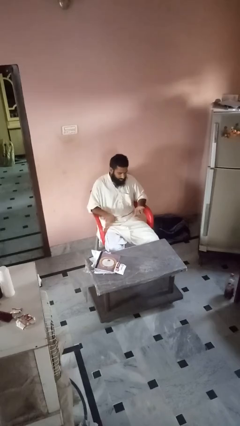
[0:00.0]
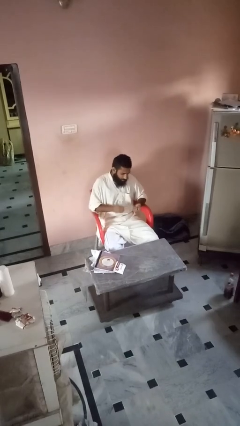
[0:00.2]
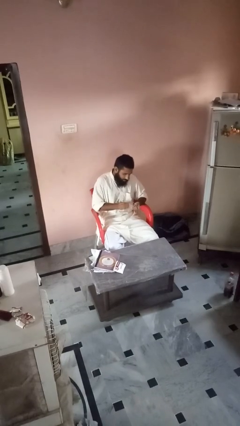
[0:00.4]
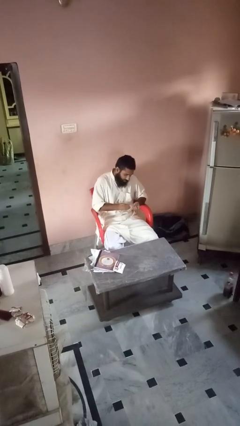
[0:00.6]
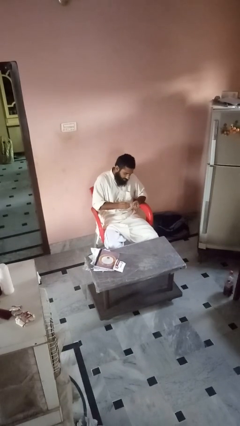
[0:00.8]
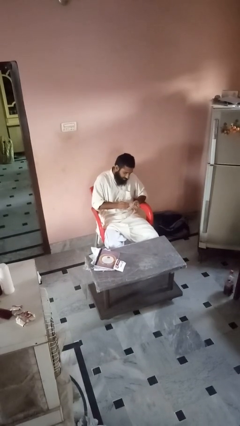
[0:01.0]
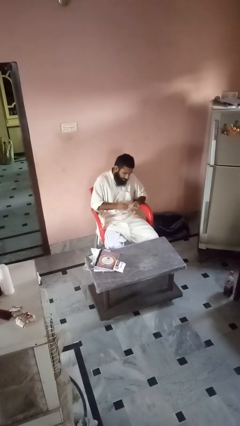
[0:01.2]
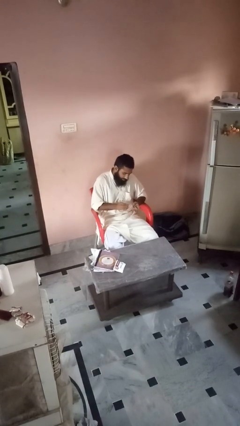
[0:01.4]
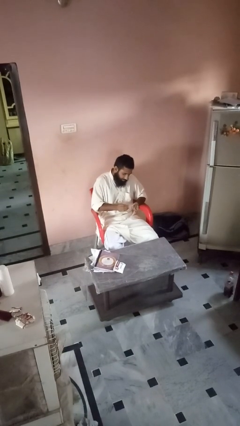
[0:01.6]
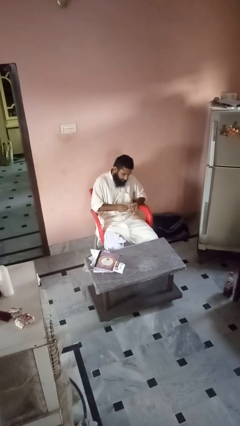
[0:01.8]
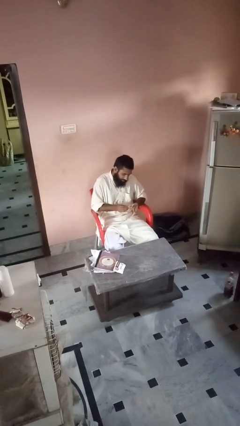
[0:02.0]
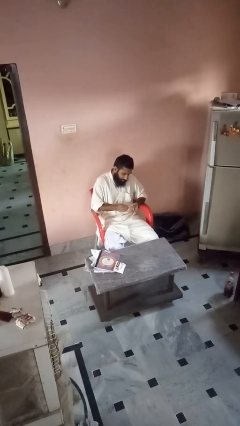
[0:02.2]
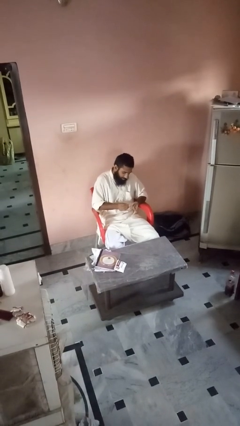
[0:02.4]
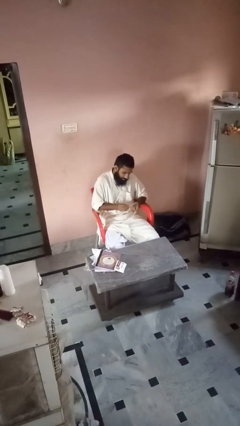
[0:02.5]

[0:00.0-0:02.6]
person files fingernails

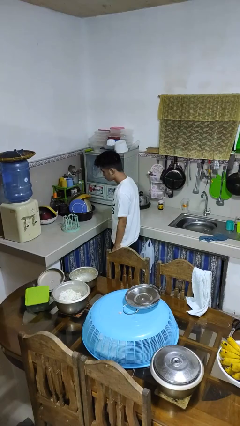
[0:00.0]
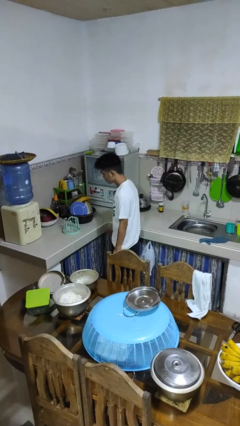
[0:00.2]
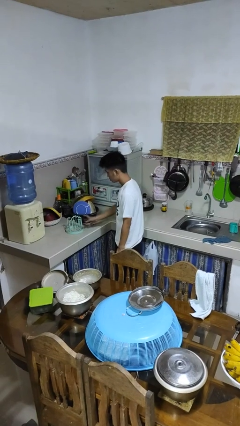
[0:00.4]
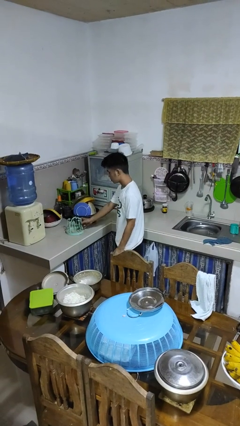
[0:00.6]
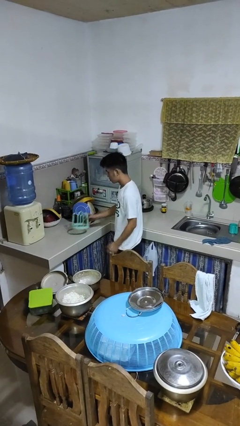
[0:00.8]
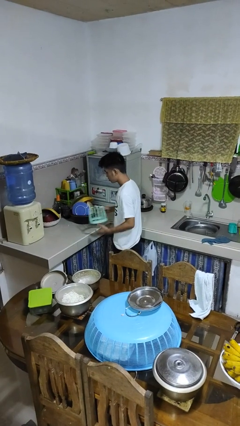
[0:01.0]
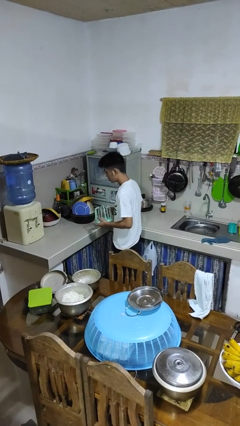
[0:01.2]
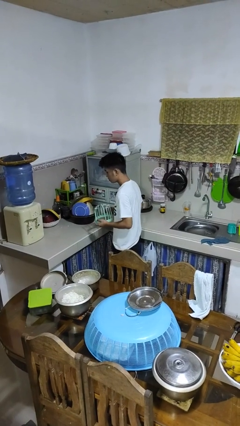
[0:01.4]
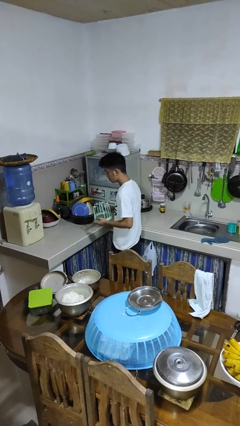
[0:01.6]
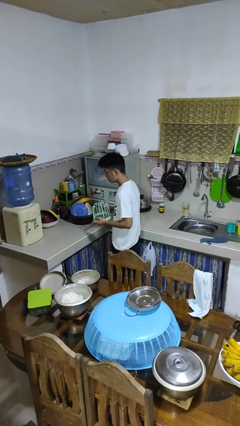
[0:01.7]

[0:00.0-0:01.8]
person picks up object from countertop

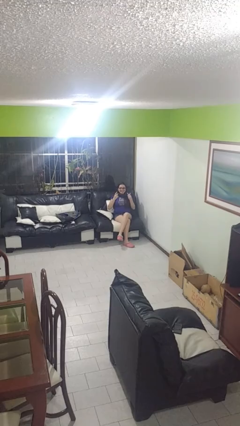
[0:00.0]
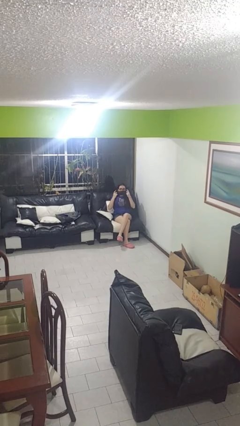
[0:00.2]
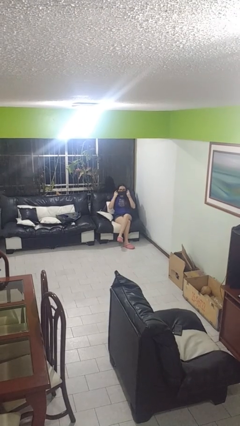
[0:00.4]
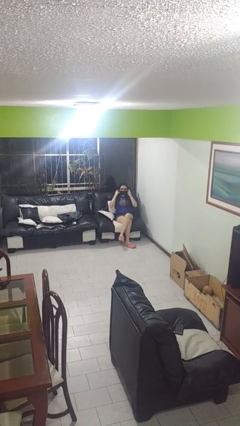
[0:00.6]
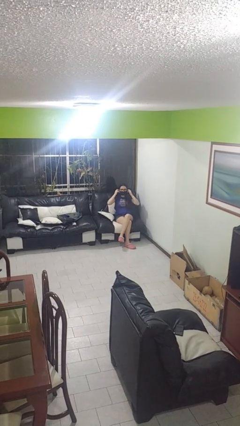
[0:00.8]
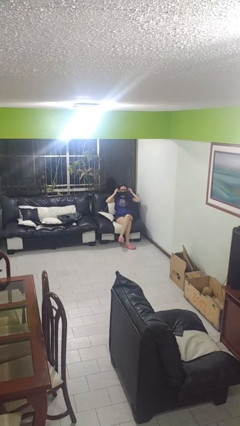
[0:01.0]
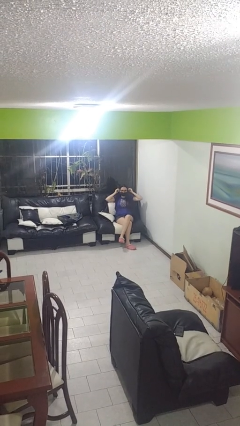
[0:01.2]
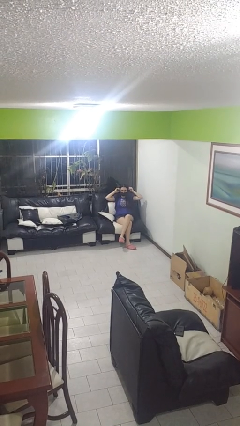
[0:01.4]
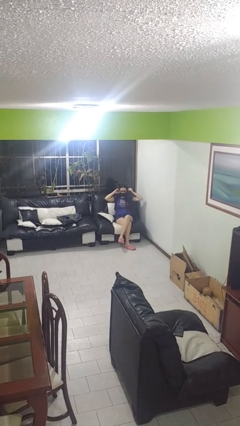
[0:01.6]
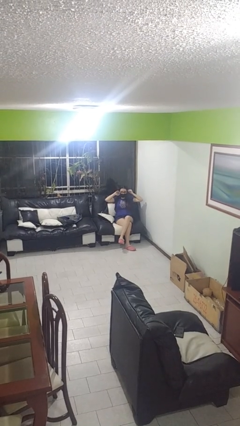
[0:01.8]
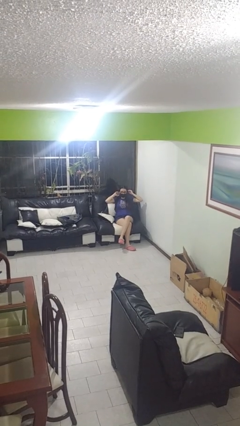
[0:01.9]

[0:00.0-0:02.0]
person puts on facemask

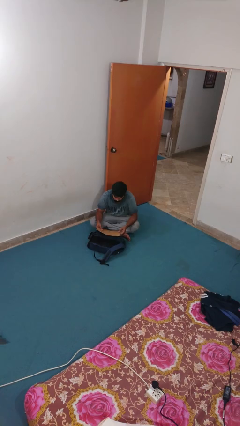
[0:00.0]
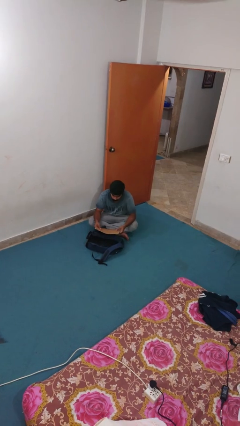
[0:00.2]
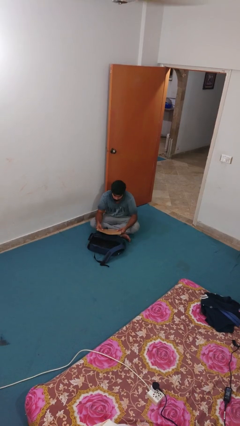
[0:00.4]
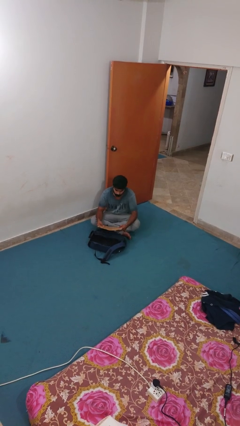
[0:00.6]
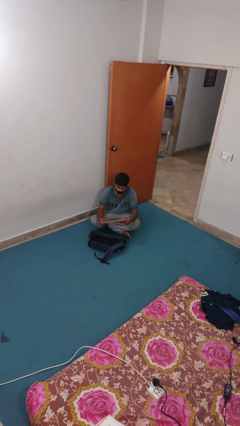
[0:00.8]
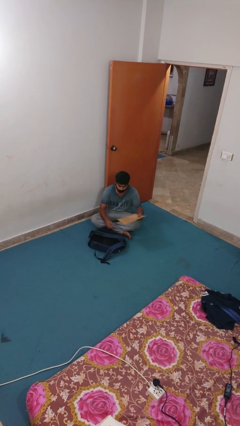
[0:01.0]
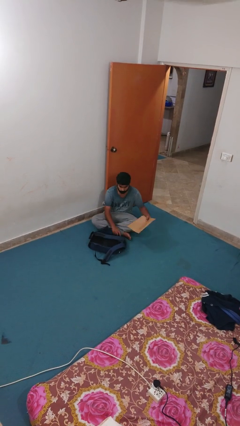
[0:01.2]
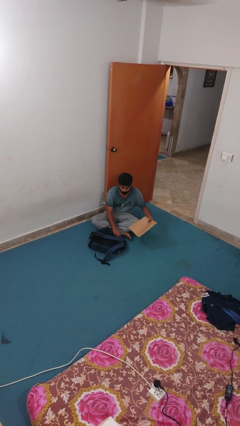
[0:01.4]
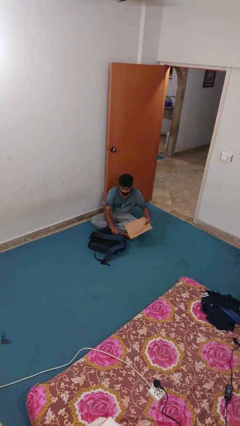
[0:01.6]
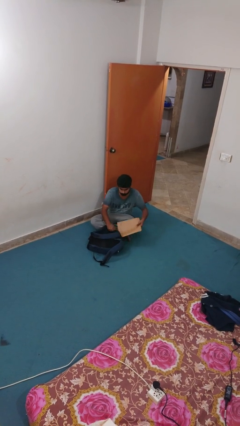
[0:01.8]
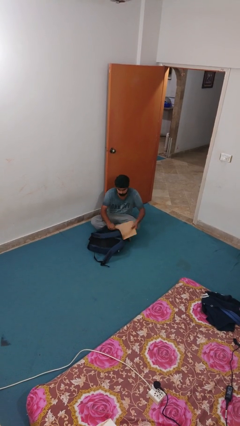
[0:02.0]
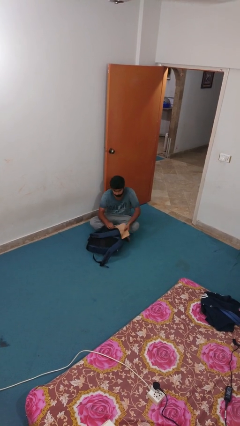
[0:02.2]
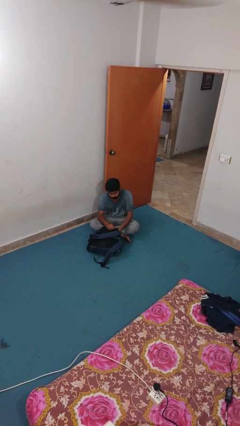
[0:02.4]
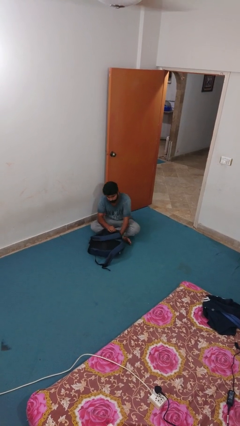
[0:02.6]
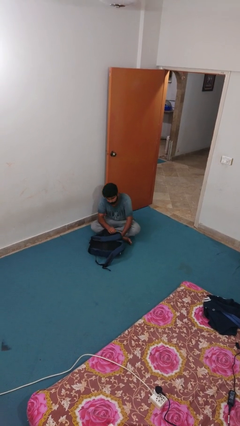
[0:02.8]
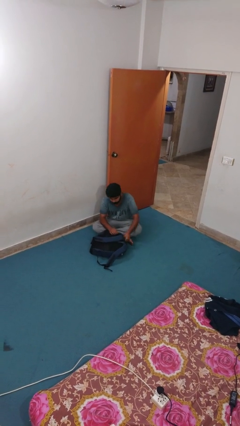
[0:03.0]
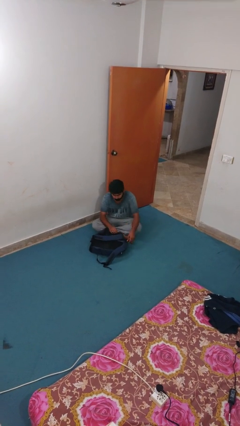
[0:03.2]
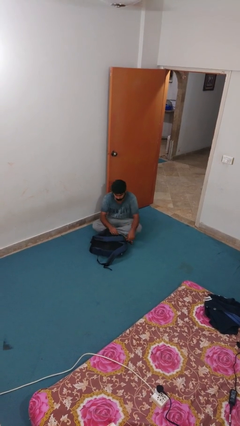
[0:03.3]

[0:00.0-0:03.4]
person puts object into backpack

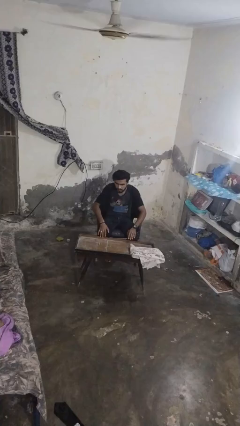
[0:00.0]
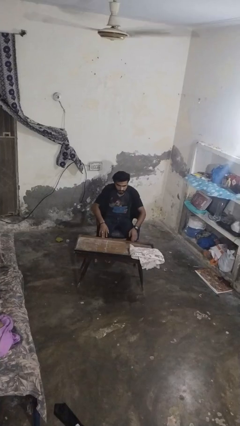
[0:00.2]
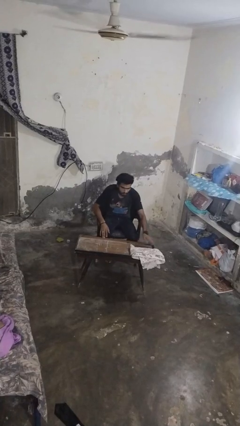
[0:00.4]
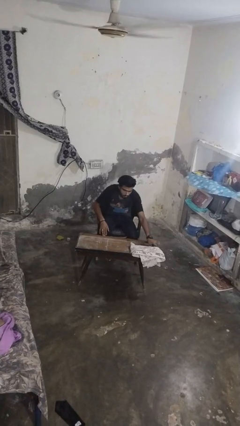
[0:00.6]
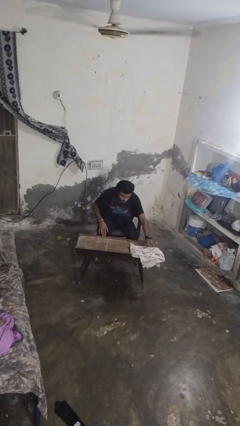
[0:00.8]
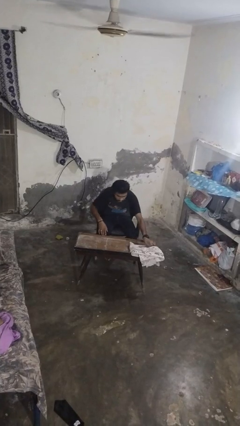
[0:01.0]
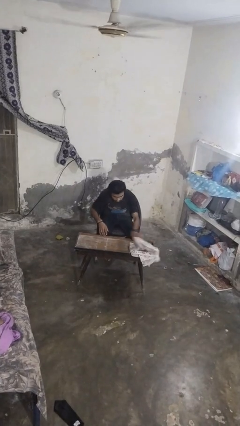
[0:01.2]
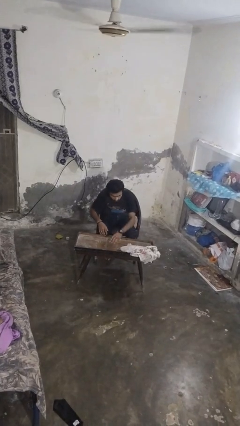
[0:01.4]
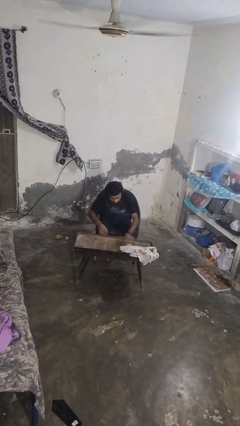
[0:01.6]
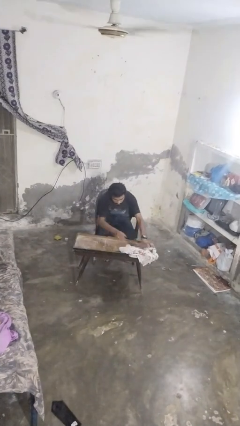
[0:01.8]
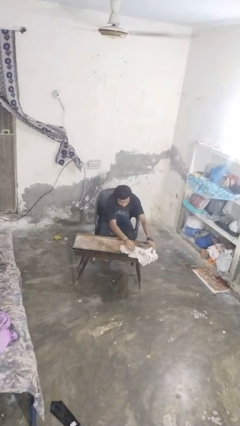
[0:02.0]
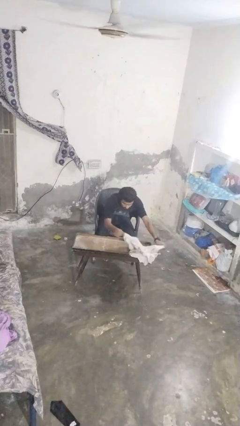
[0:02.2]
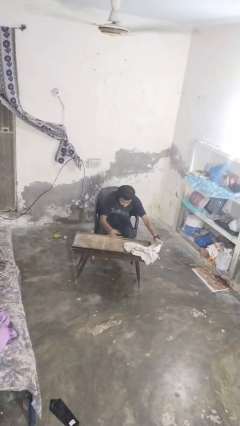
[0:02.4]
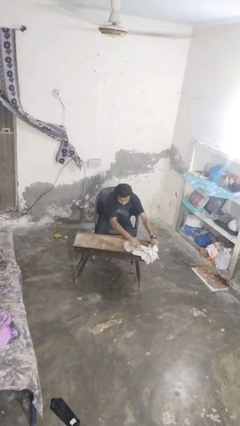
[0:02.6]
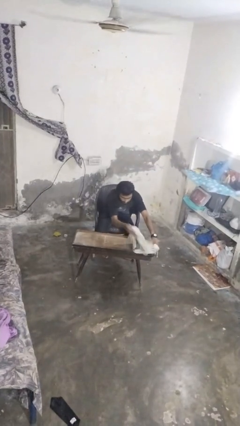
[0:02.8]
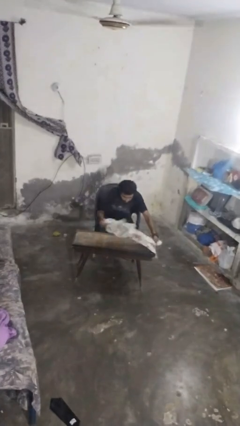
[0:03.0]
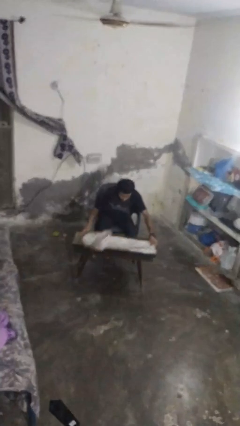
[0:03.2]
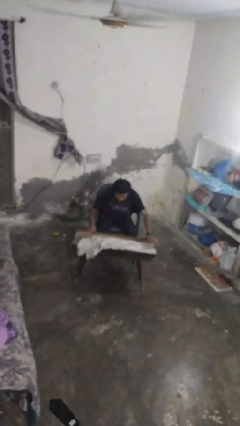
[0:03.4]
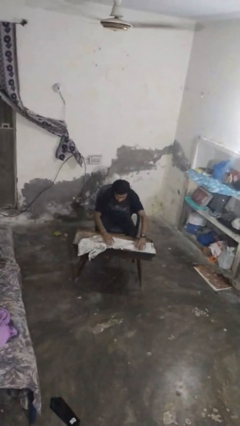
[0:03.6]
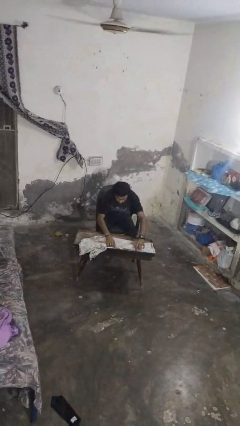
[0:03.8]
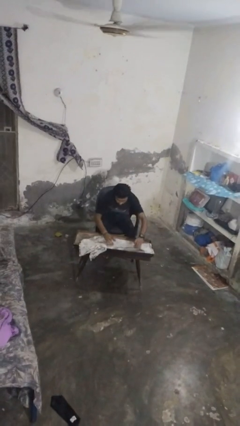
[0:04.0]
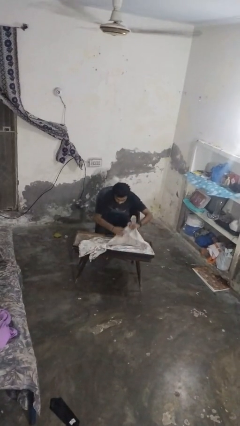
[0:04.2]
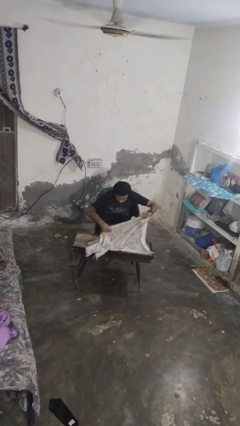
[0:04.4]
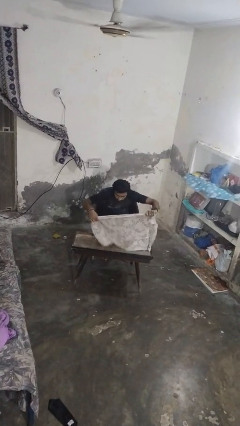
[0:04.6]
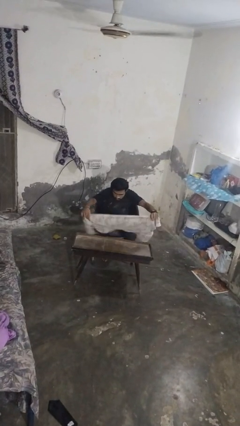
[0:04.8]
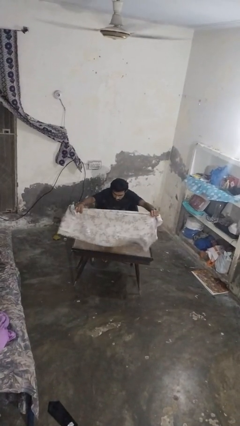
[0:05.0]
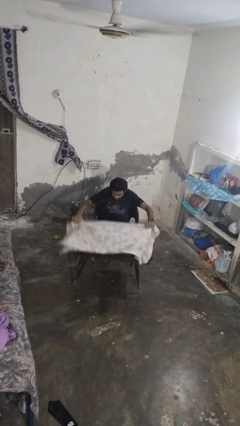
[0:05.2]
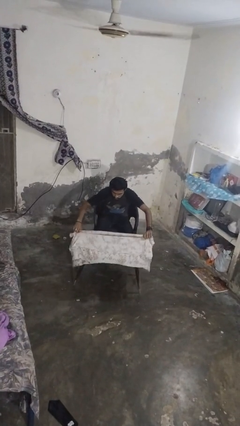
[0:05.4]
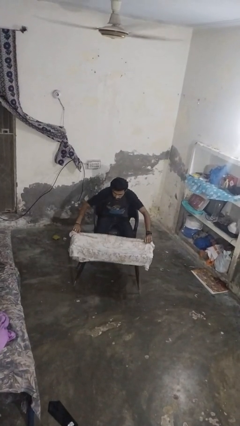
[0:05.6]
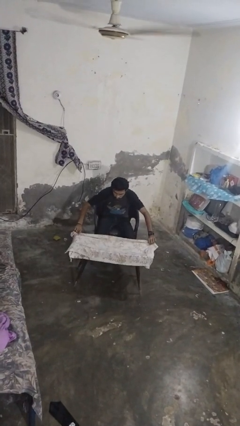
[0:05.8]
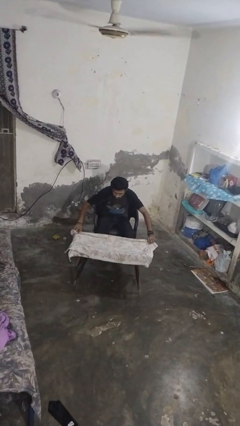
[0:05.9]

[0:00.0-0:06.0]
person spreads tablecloth

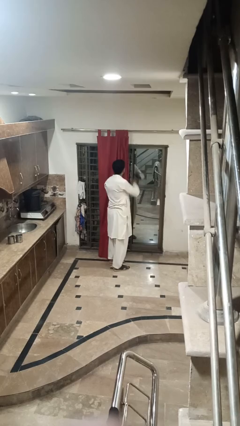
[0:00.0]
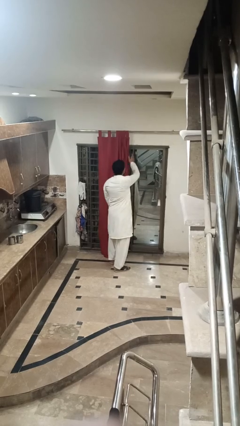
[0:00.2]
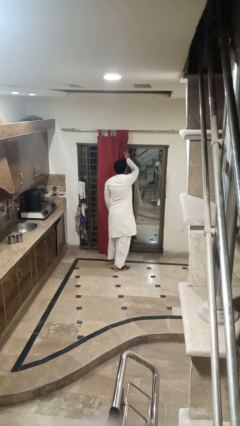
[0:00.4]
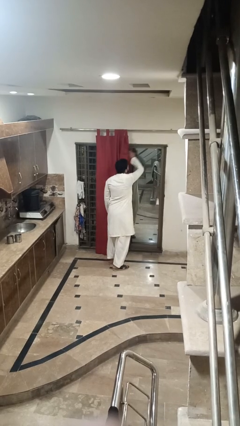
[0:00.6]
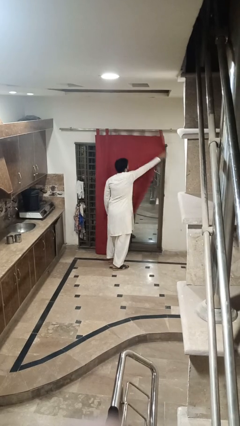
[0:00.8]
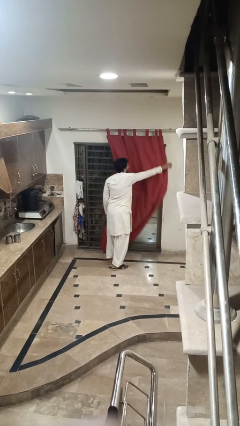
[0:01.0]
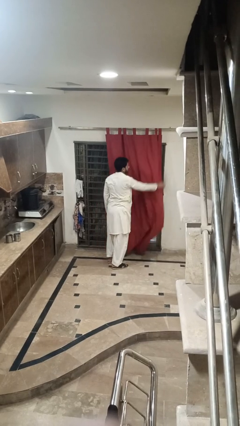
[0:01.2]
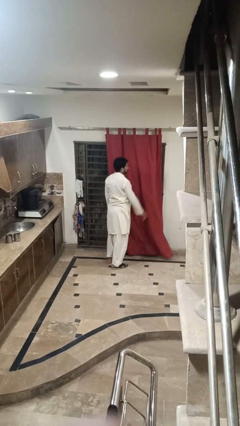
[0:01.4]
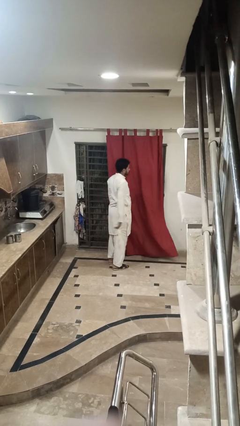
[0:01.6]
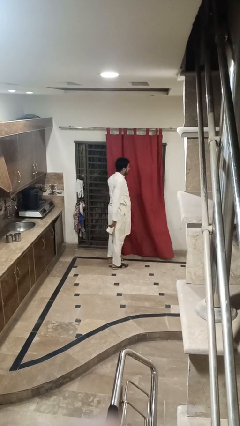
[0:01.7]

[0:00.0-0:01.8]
person closes curtains
